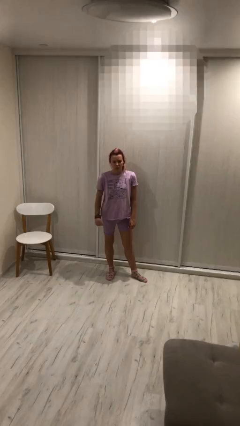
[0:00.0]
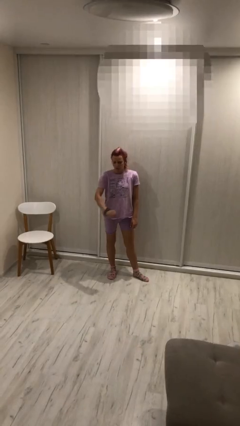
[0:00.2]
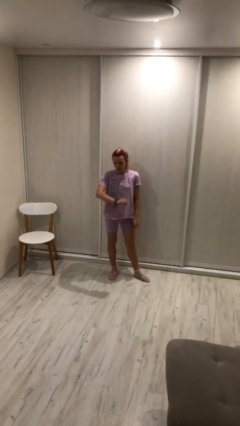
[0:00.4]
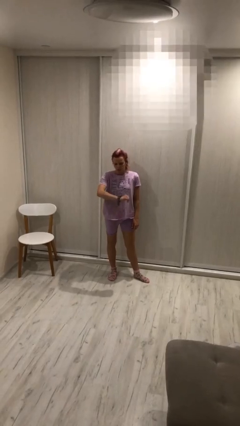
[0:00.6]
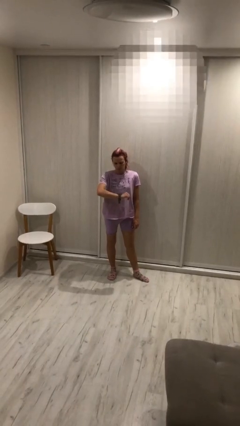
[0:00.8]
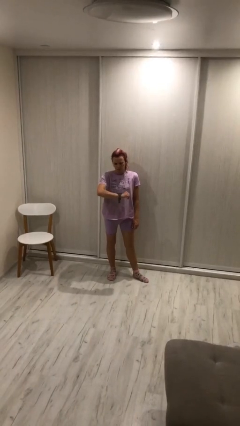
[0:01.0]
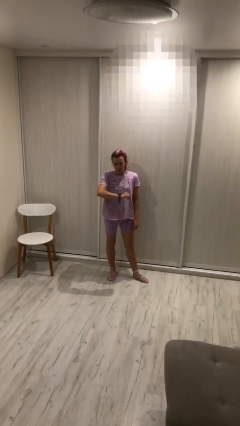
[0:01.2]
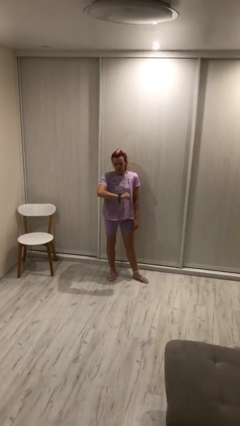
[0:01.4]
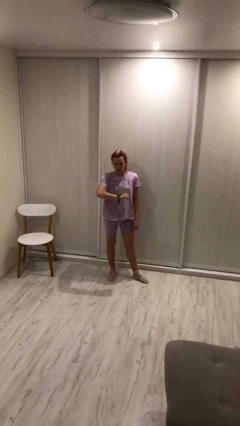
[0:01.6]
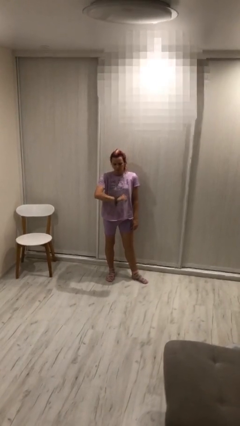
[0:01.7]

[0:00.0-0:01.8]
person looks at wristwatch

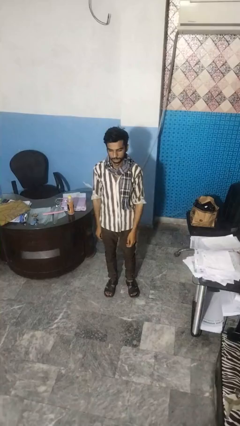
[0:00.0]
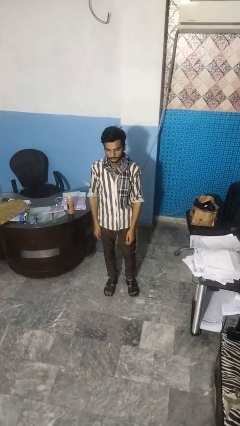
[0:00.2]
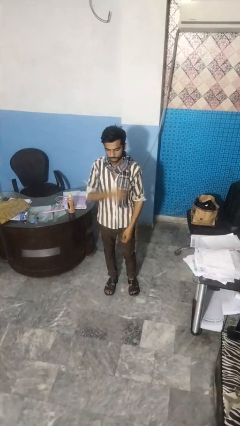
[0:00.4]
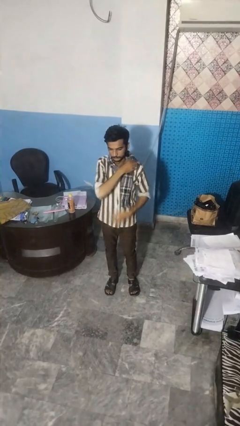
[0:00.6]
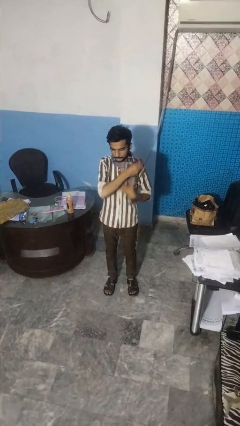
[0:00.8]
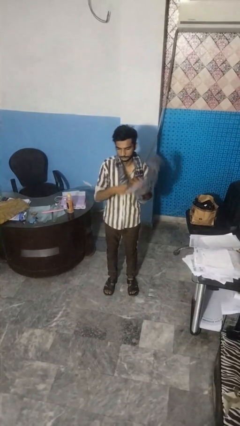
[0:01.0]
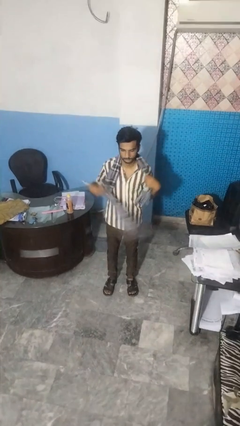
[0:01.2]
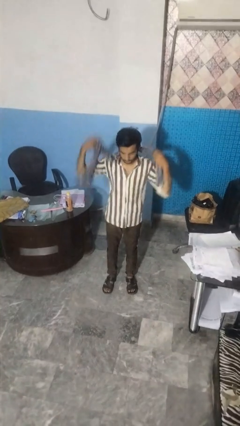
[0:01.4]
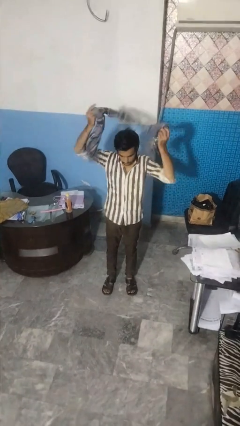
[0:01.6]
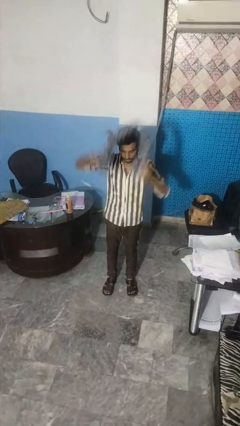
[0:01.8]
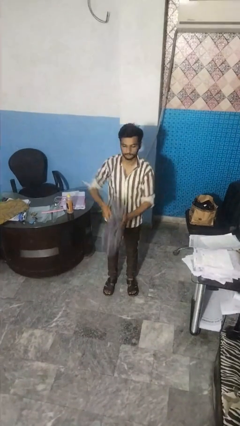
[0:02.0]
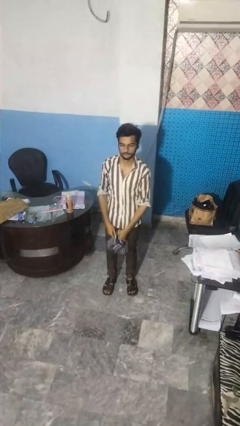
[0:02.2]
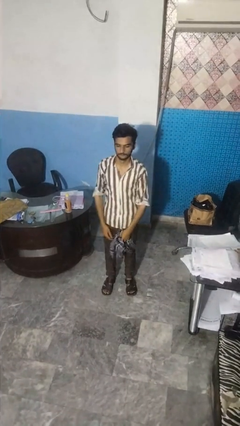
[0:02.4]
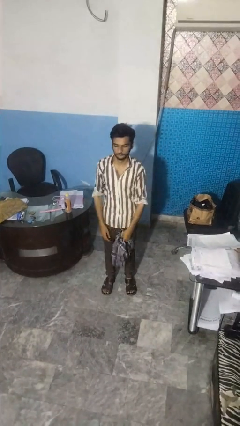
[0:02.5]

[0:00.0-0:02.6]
person takes off scarf

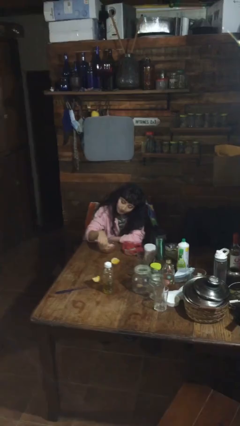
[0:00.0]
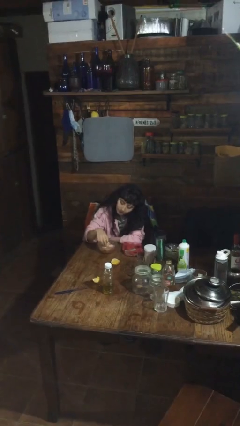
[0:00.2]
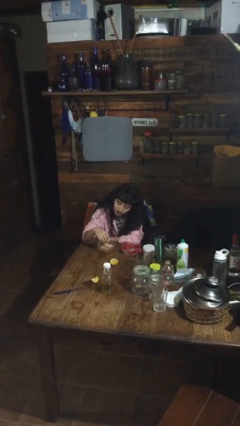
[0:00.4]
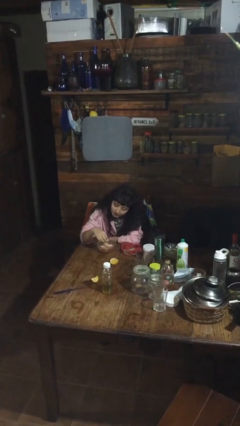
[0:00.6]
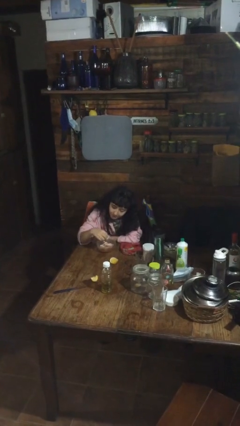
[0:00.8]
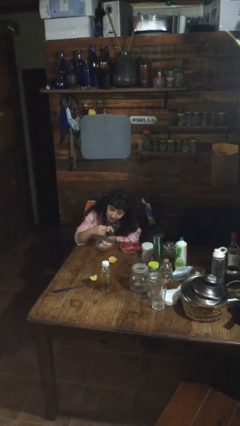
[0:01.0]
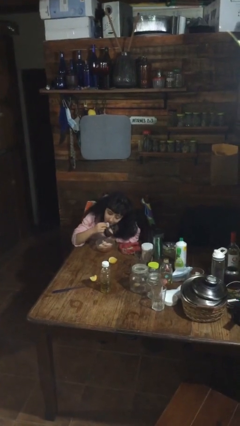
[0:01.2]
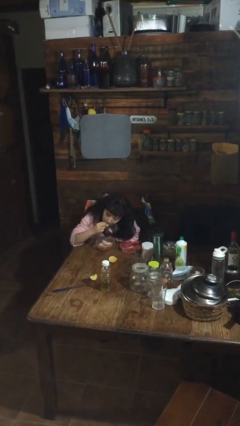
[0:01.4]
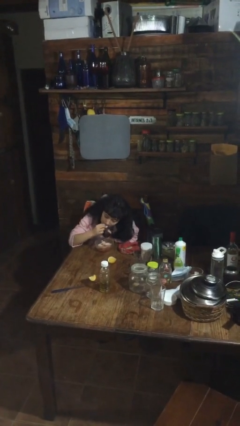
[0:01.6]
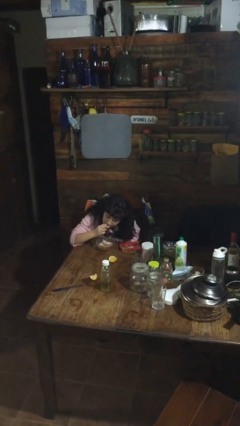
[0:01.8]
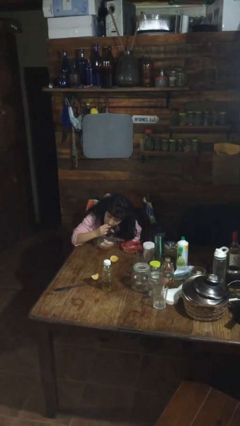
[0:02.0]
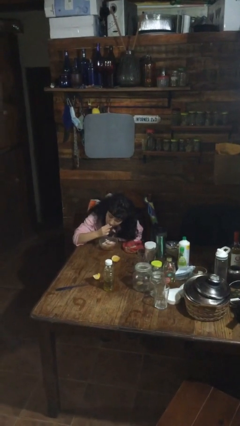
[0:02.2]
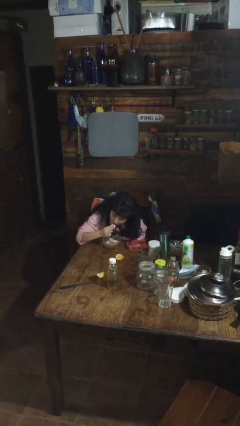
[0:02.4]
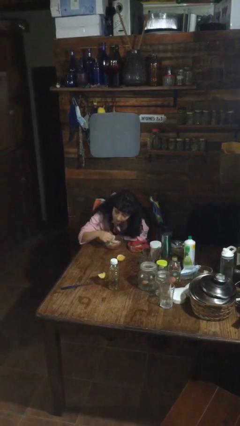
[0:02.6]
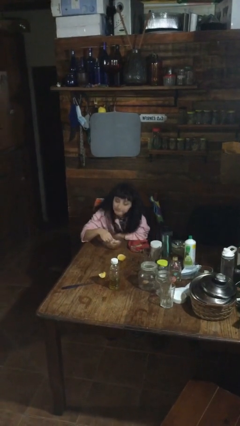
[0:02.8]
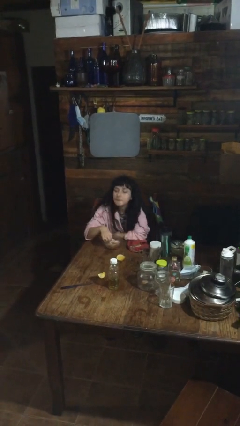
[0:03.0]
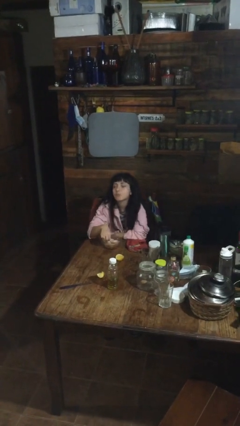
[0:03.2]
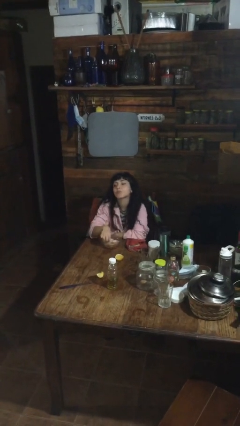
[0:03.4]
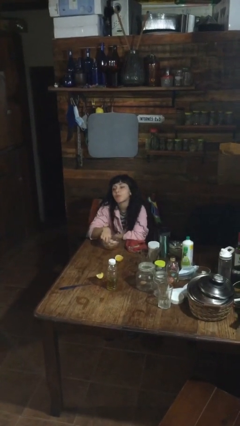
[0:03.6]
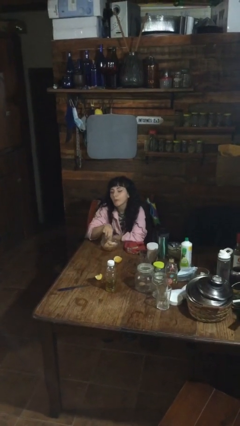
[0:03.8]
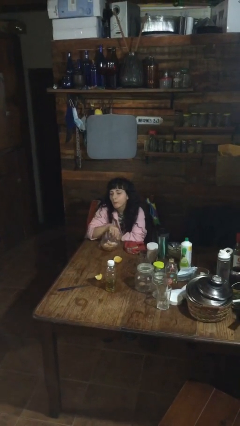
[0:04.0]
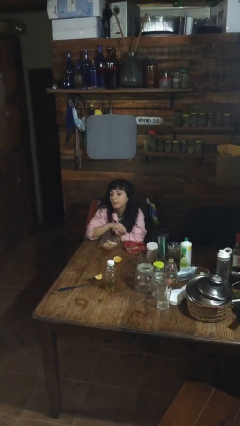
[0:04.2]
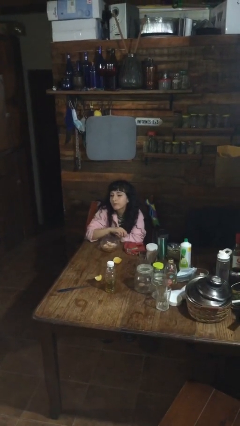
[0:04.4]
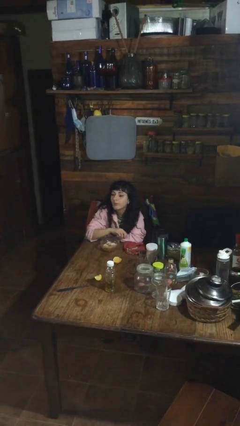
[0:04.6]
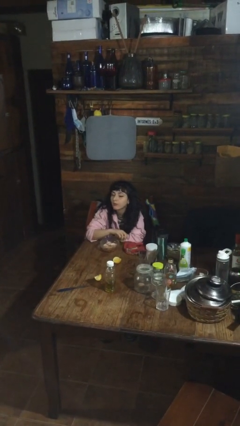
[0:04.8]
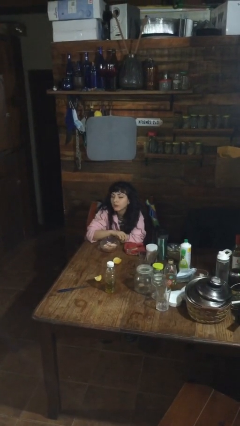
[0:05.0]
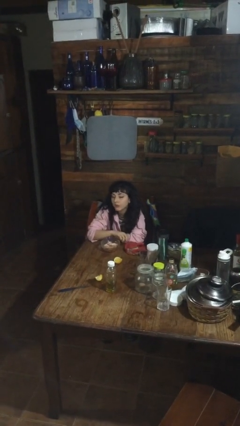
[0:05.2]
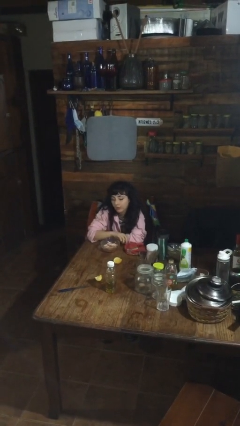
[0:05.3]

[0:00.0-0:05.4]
person eats with hands

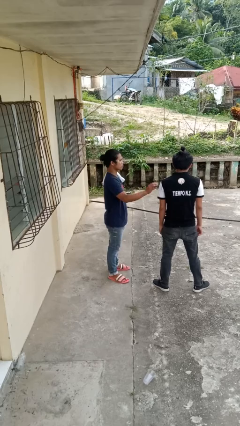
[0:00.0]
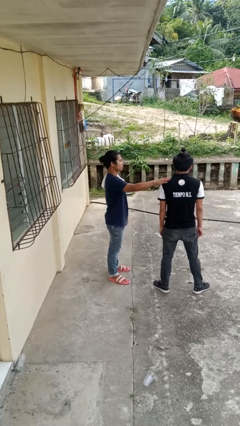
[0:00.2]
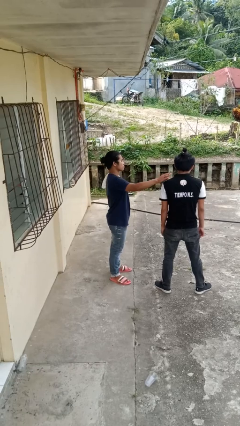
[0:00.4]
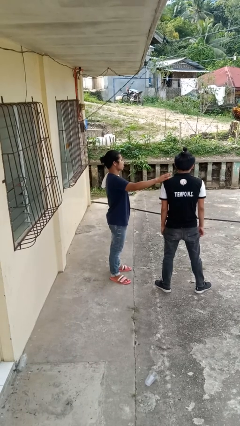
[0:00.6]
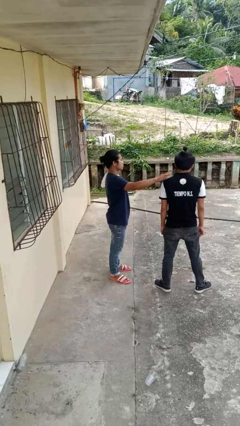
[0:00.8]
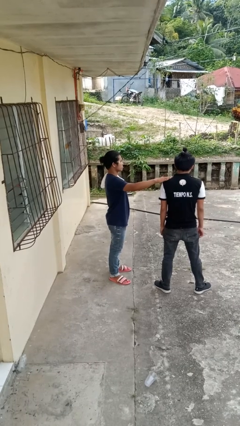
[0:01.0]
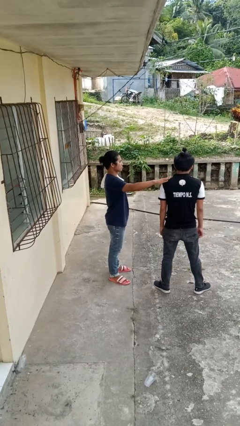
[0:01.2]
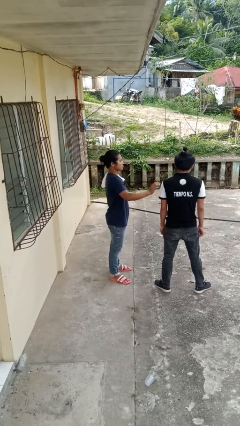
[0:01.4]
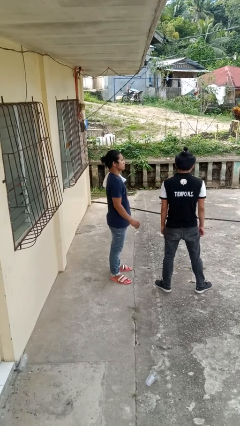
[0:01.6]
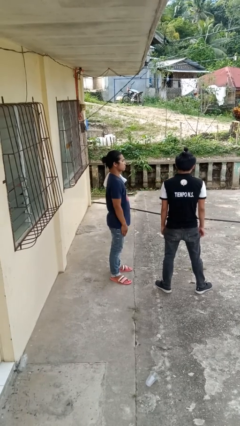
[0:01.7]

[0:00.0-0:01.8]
person pounds shoulders of person

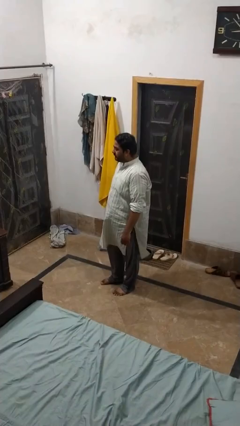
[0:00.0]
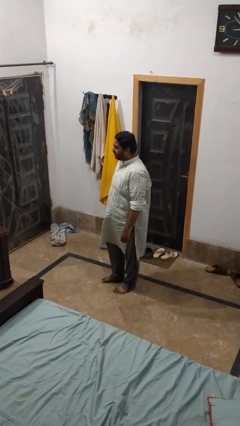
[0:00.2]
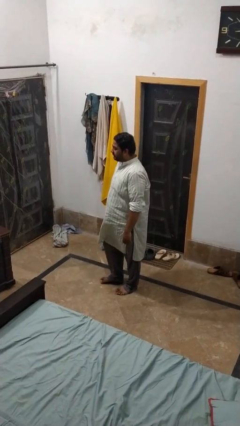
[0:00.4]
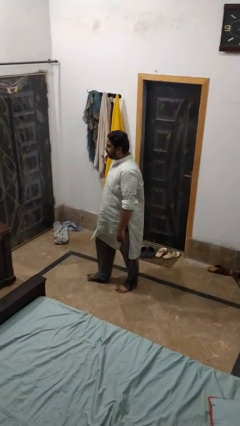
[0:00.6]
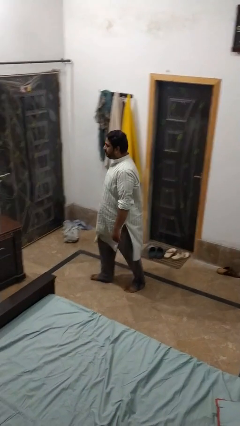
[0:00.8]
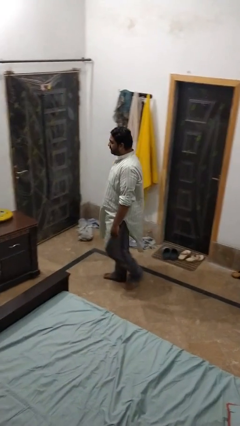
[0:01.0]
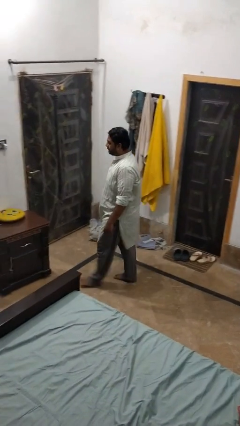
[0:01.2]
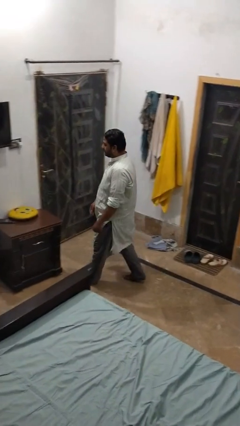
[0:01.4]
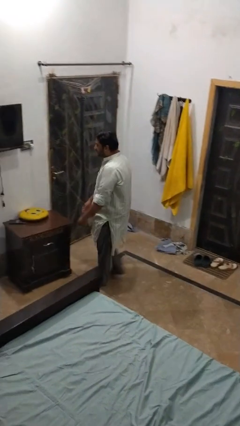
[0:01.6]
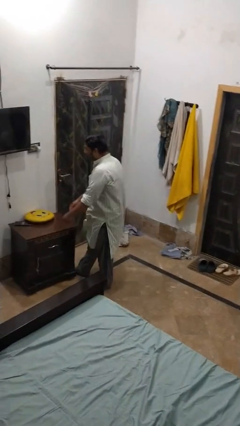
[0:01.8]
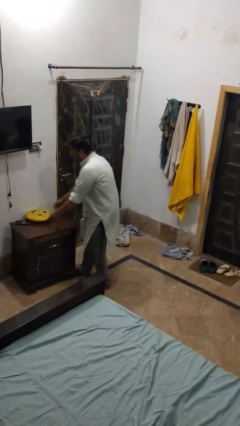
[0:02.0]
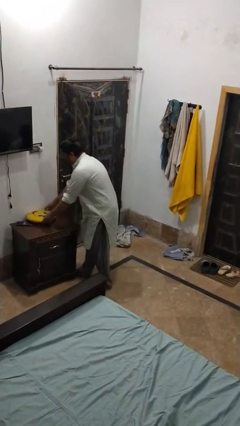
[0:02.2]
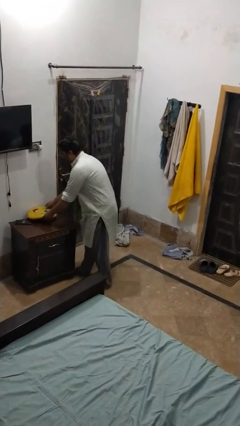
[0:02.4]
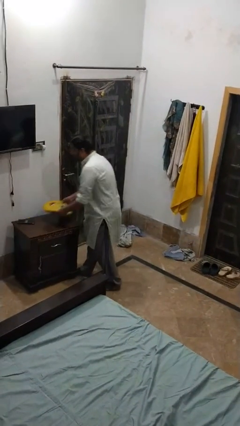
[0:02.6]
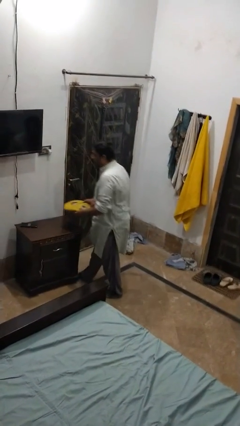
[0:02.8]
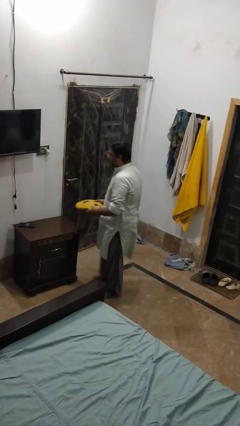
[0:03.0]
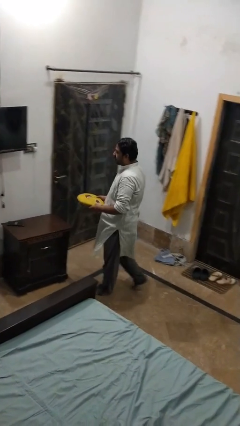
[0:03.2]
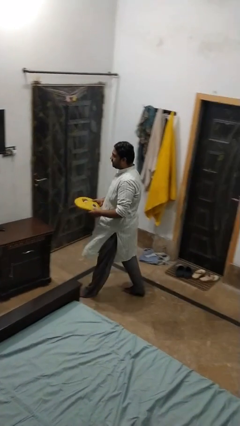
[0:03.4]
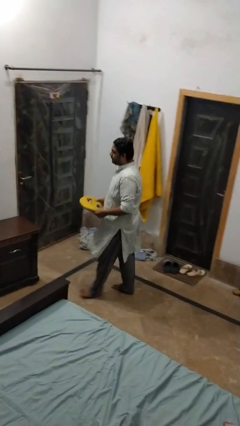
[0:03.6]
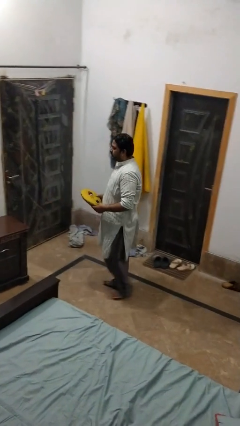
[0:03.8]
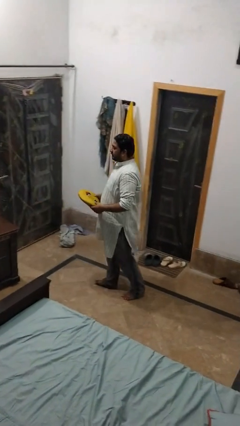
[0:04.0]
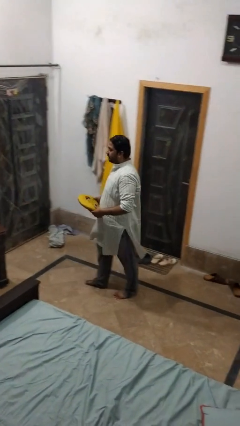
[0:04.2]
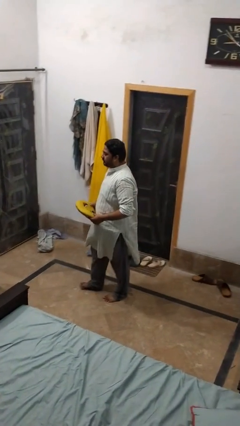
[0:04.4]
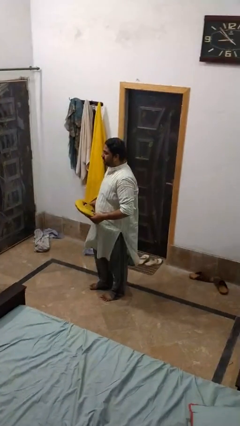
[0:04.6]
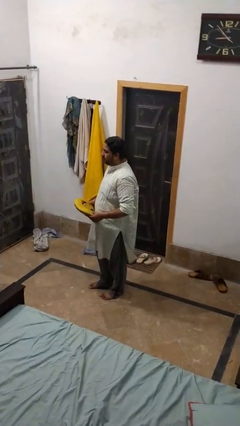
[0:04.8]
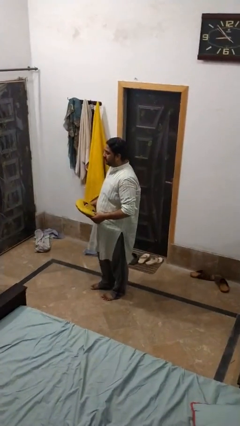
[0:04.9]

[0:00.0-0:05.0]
person picks up object from table

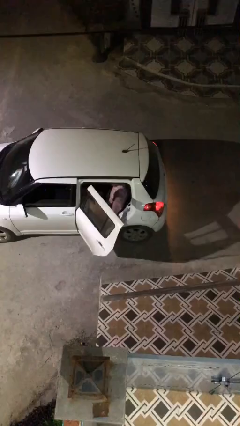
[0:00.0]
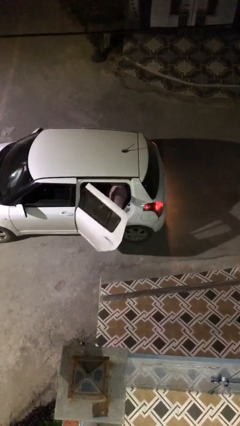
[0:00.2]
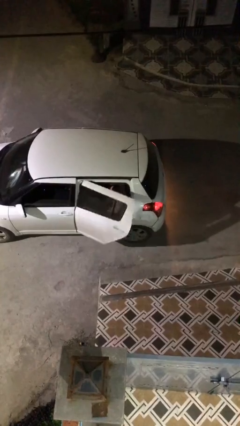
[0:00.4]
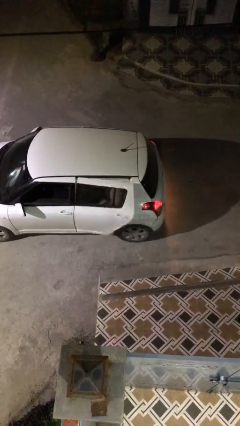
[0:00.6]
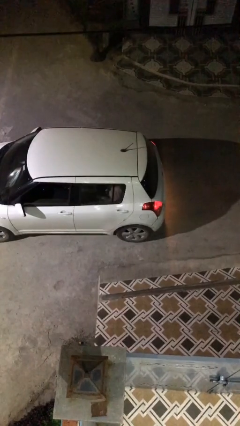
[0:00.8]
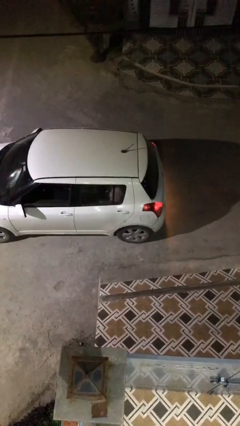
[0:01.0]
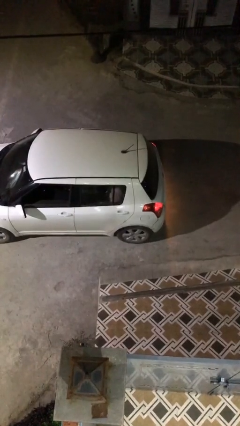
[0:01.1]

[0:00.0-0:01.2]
person closes car door
